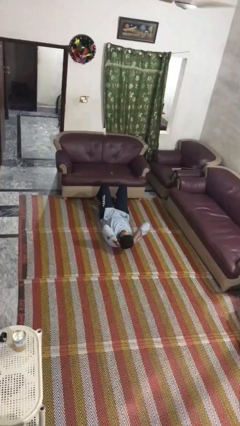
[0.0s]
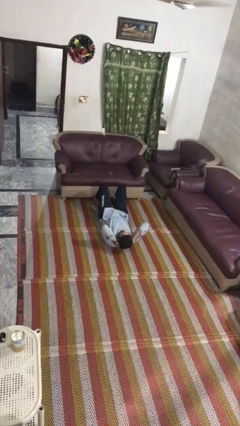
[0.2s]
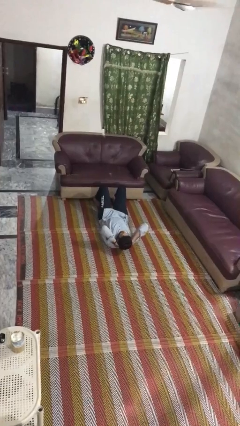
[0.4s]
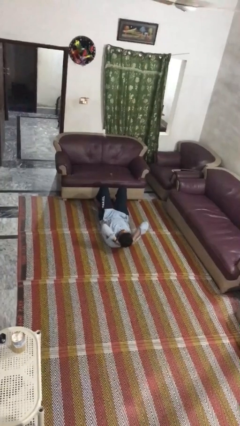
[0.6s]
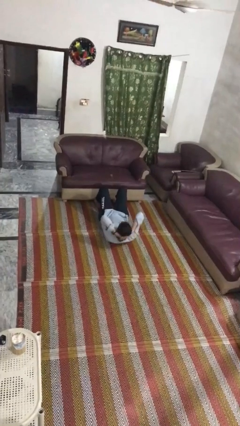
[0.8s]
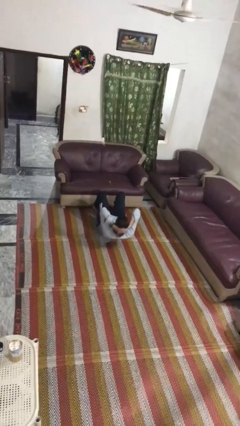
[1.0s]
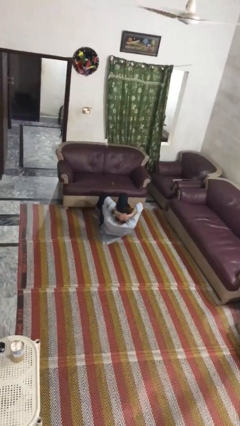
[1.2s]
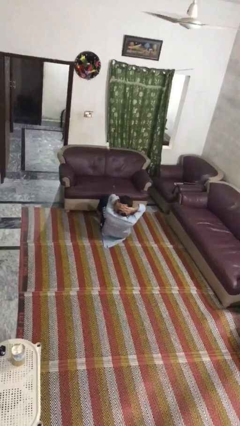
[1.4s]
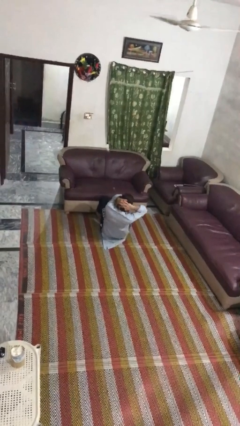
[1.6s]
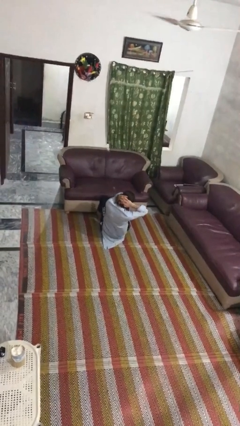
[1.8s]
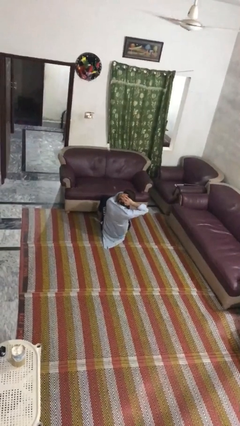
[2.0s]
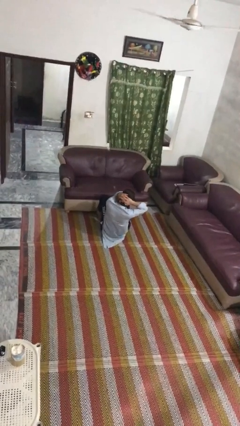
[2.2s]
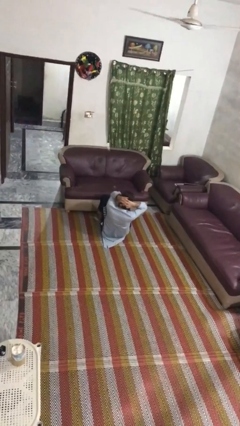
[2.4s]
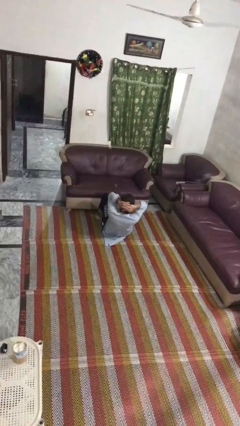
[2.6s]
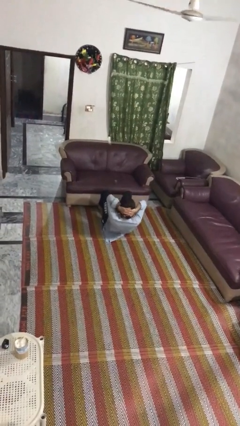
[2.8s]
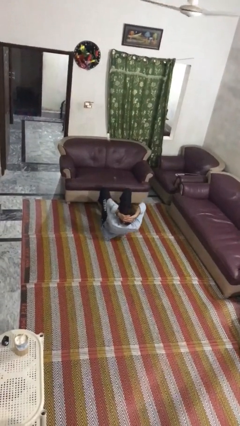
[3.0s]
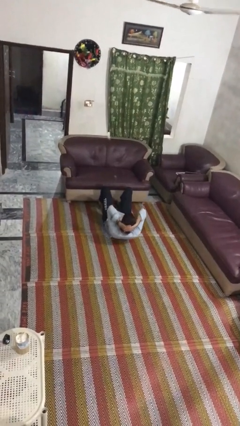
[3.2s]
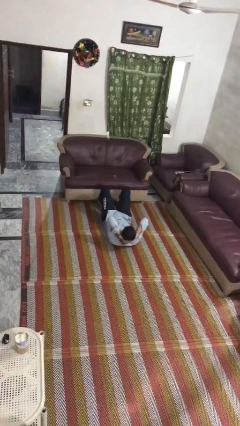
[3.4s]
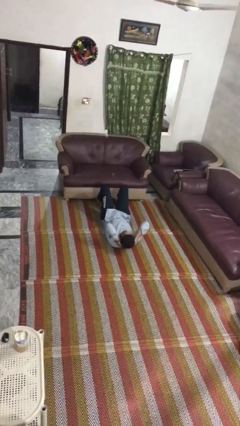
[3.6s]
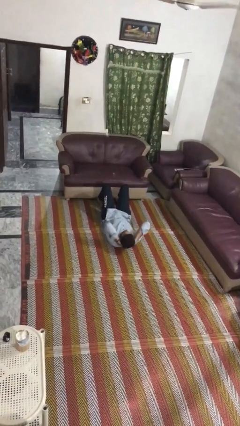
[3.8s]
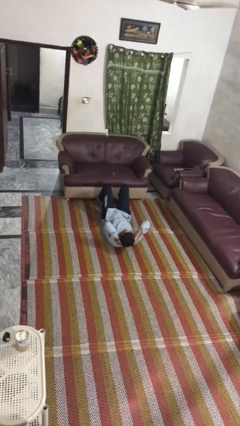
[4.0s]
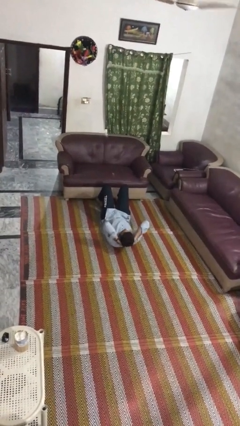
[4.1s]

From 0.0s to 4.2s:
person exercises with situp

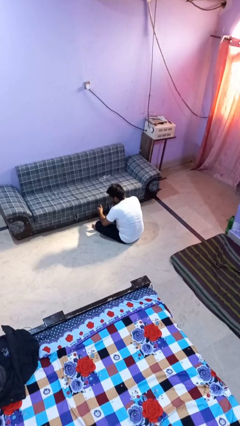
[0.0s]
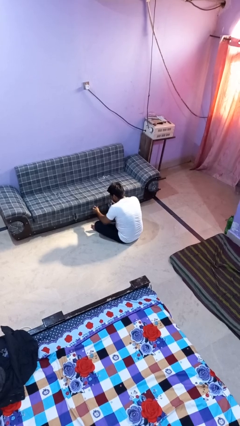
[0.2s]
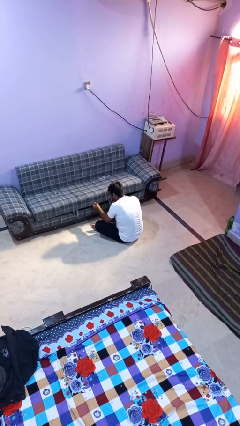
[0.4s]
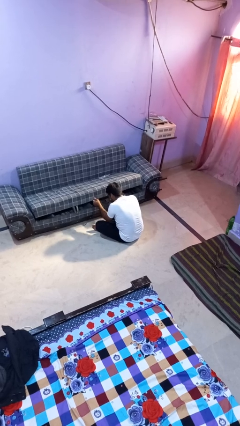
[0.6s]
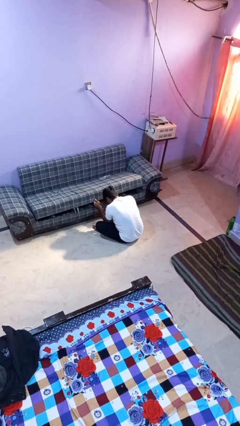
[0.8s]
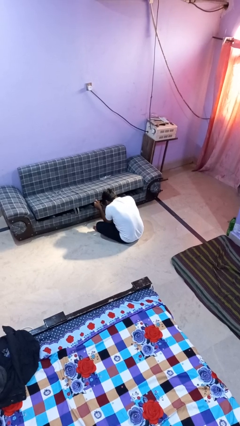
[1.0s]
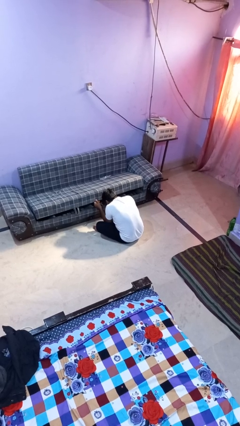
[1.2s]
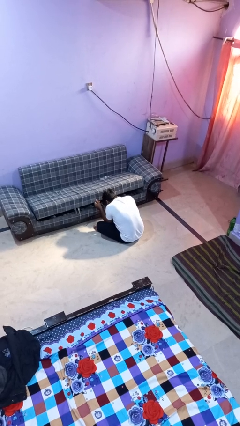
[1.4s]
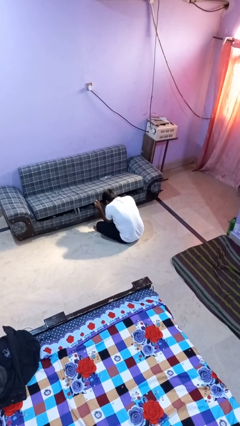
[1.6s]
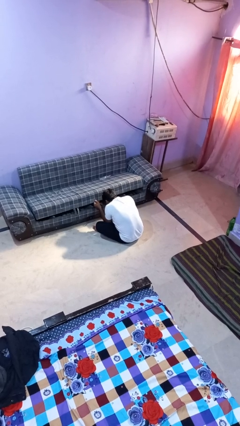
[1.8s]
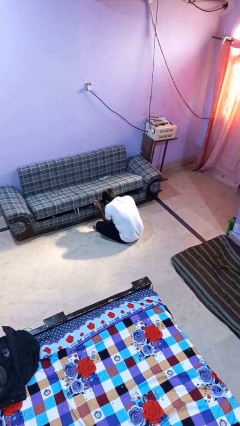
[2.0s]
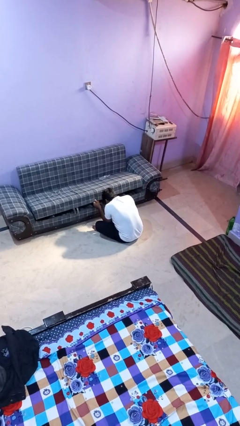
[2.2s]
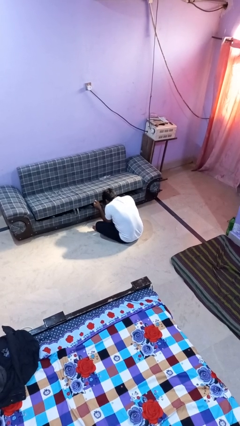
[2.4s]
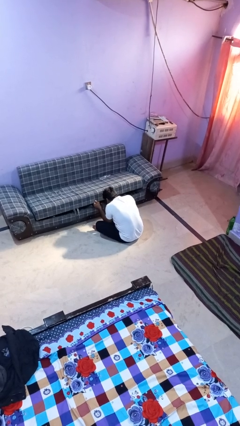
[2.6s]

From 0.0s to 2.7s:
person searches under couch

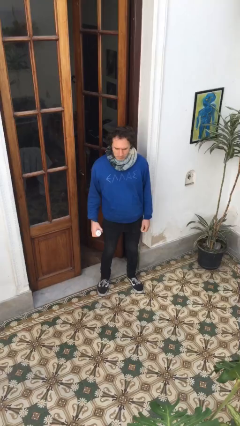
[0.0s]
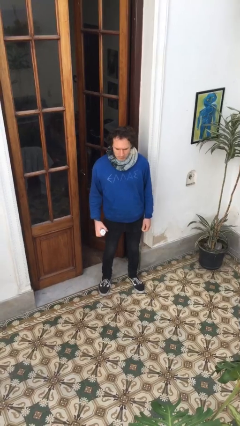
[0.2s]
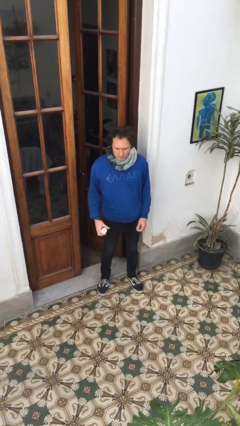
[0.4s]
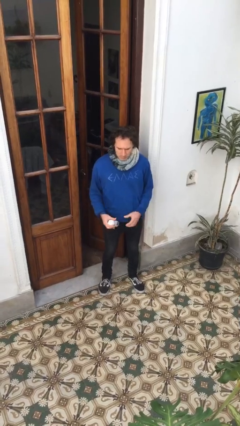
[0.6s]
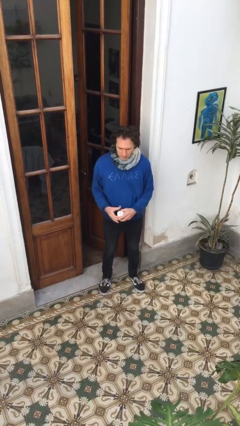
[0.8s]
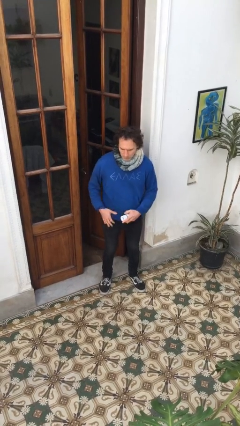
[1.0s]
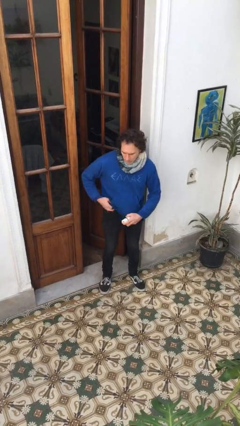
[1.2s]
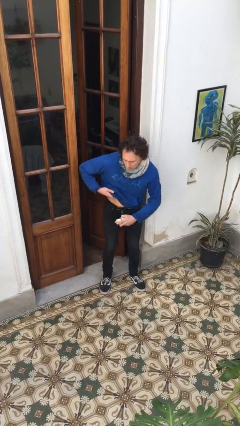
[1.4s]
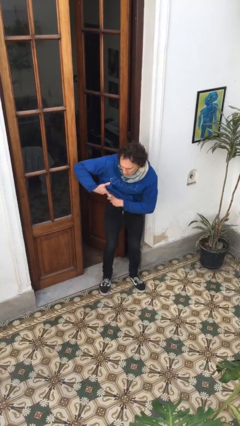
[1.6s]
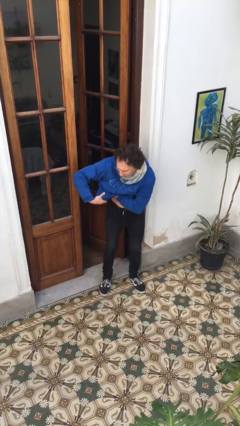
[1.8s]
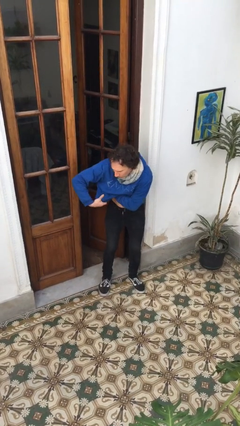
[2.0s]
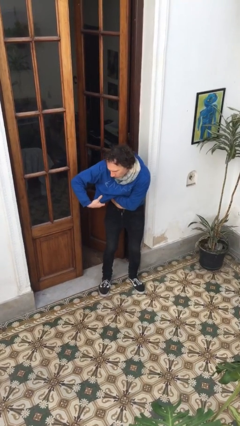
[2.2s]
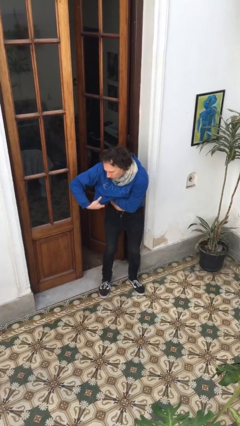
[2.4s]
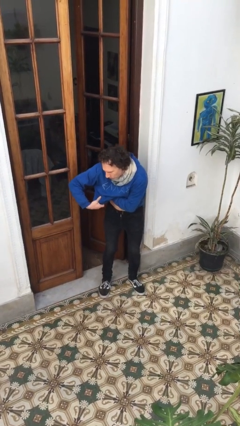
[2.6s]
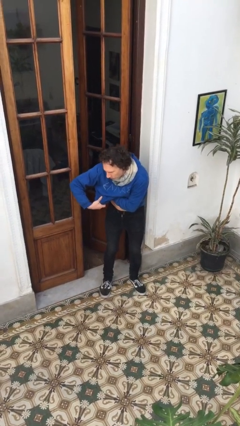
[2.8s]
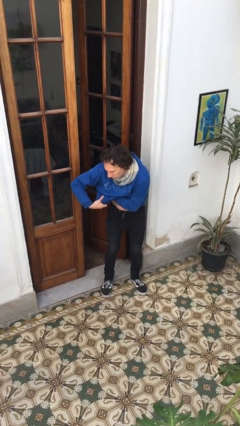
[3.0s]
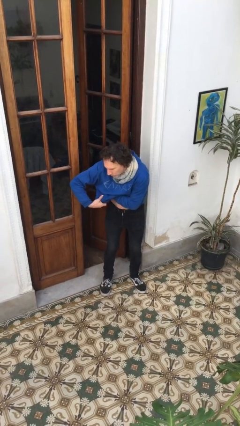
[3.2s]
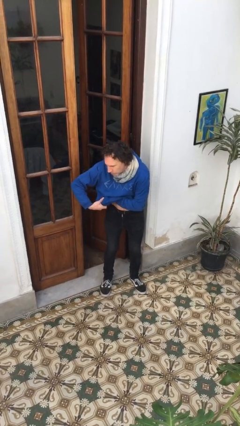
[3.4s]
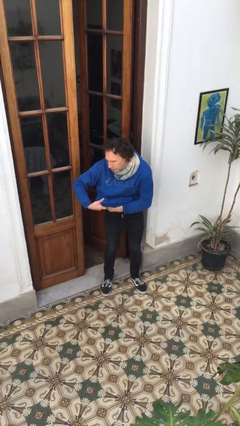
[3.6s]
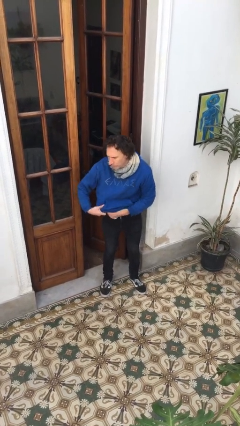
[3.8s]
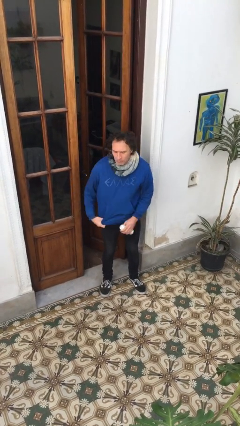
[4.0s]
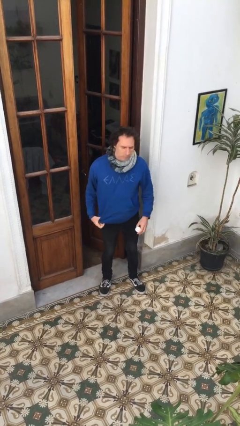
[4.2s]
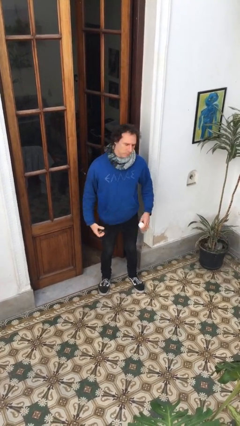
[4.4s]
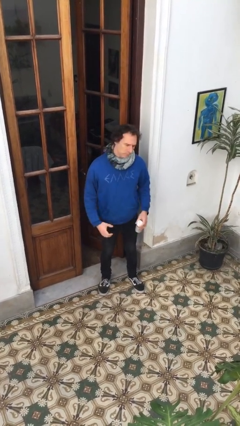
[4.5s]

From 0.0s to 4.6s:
person applies deodorant

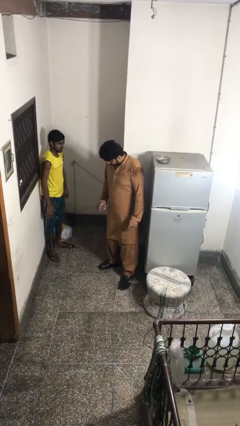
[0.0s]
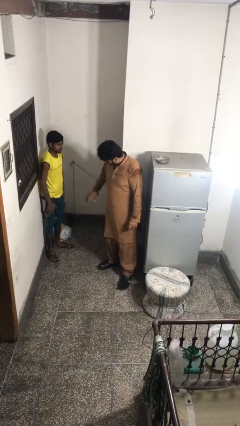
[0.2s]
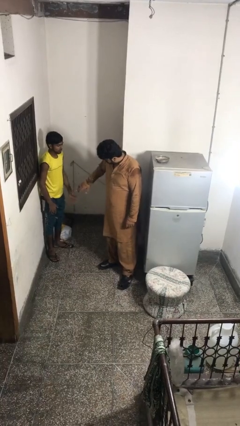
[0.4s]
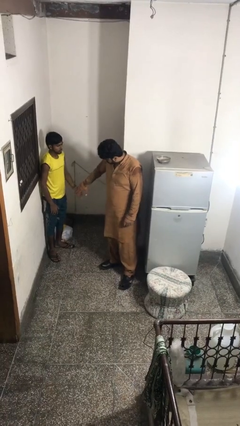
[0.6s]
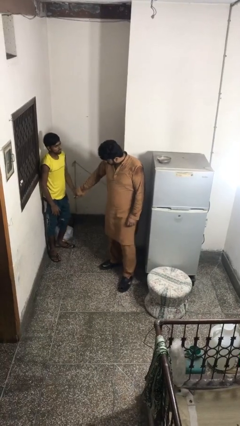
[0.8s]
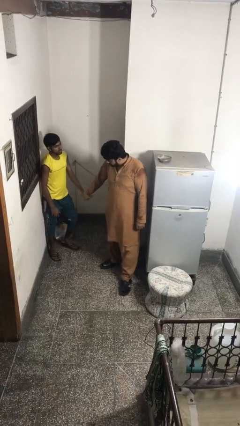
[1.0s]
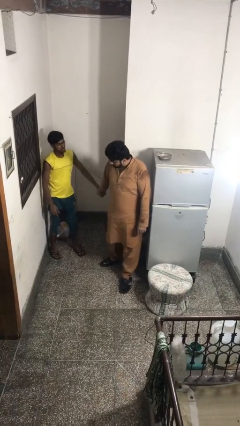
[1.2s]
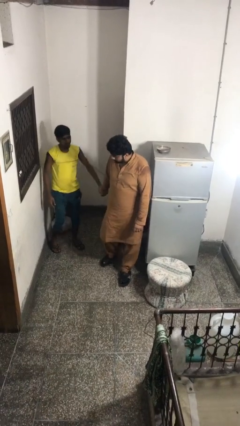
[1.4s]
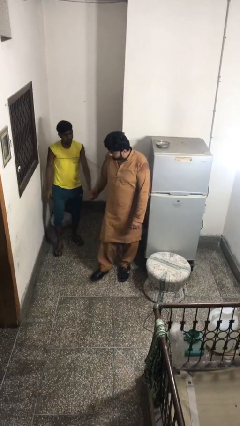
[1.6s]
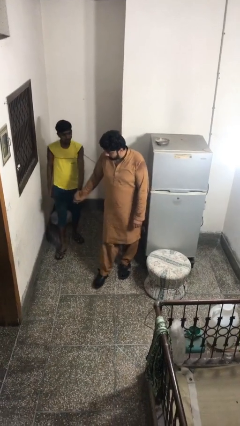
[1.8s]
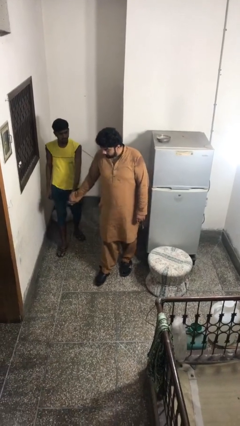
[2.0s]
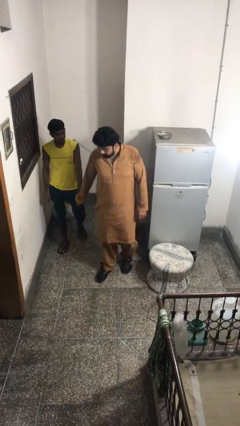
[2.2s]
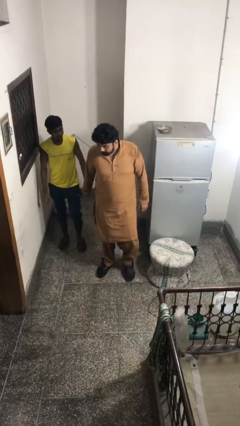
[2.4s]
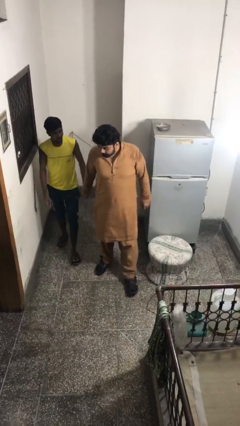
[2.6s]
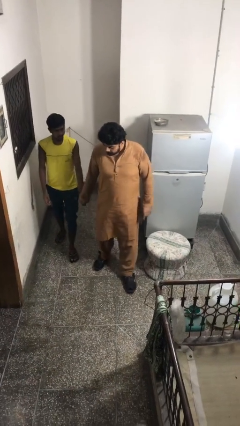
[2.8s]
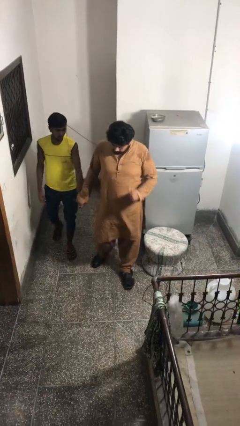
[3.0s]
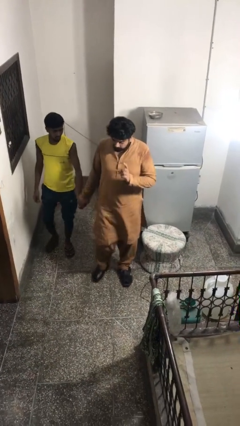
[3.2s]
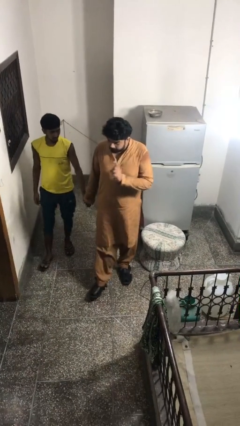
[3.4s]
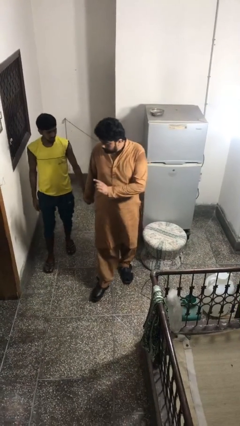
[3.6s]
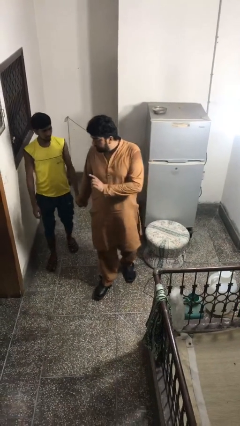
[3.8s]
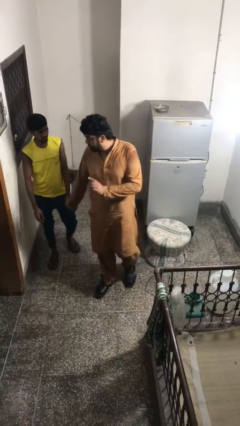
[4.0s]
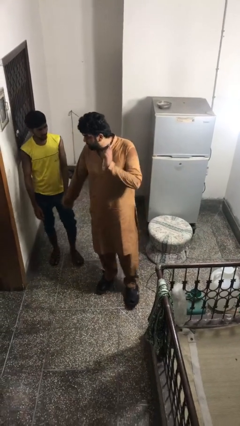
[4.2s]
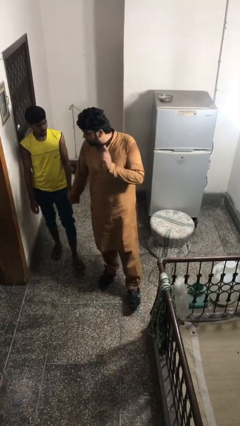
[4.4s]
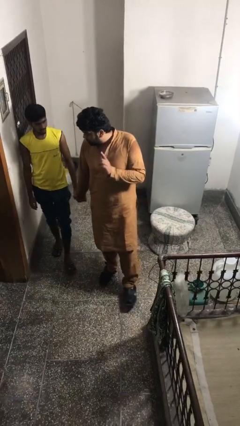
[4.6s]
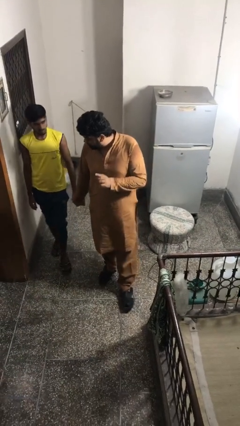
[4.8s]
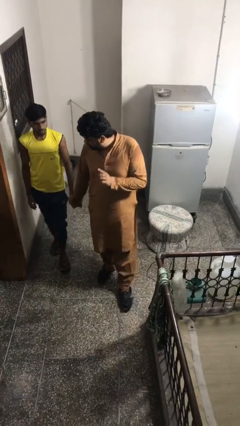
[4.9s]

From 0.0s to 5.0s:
person holds hand

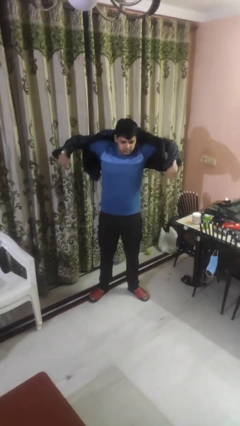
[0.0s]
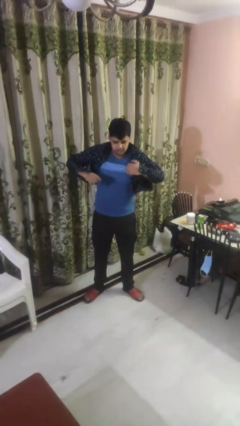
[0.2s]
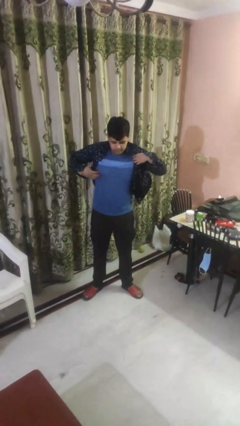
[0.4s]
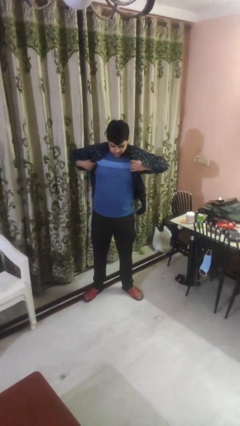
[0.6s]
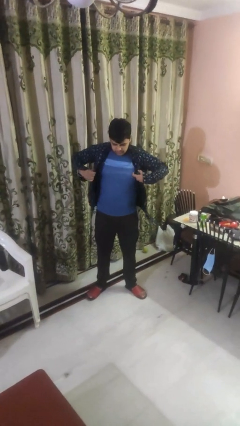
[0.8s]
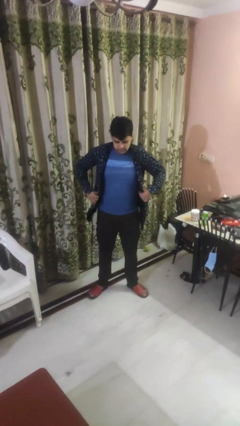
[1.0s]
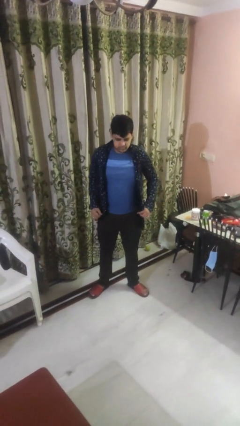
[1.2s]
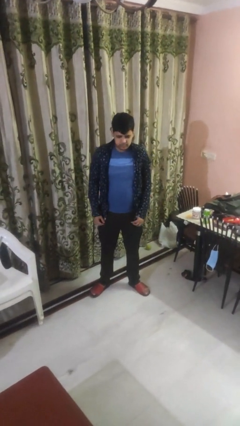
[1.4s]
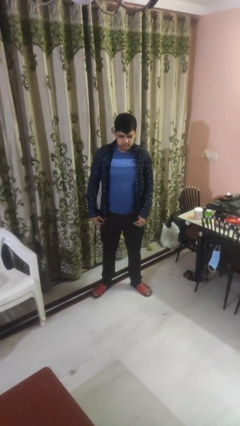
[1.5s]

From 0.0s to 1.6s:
person puts on shirt
